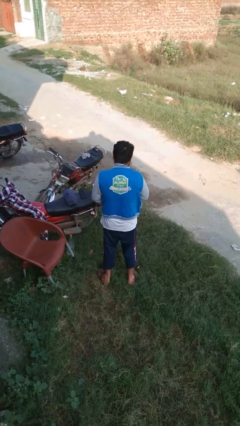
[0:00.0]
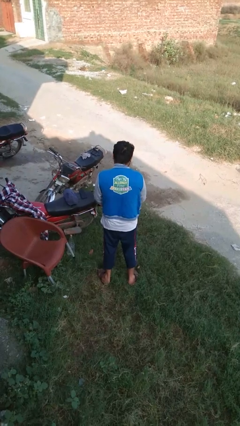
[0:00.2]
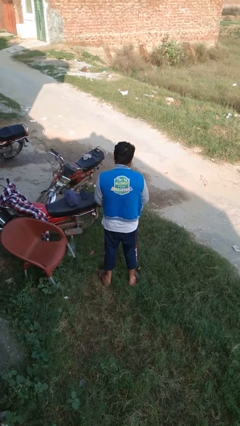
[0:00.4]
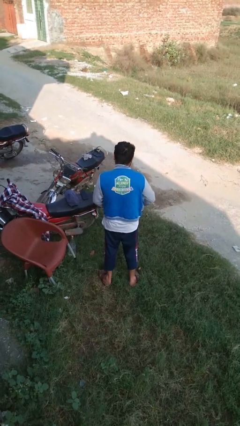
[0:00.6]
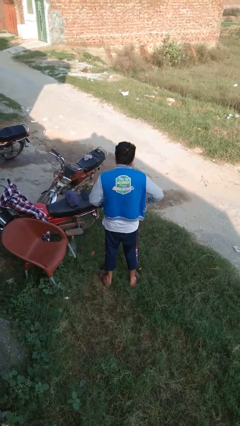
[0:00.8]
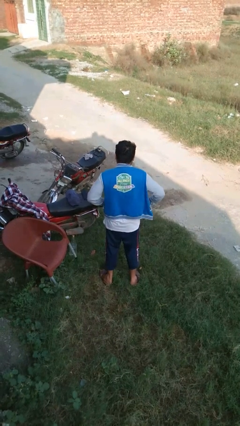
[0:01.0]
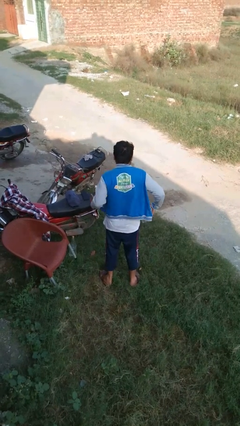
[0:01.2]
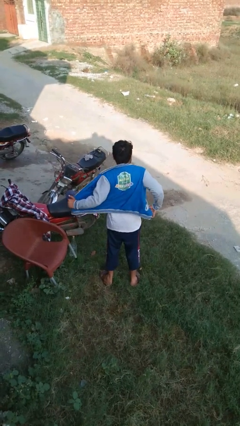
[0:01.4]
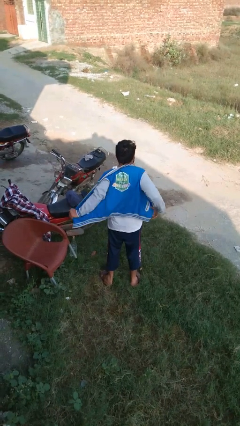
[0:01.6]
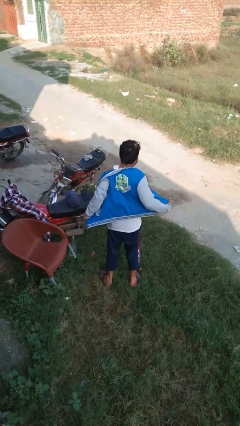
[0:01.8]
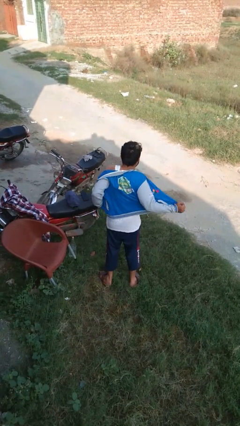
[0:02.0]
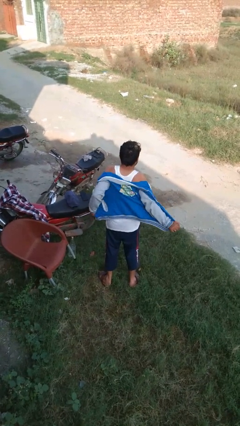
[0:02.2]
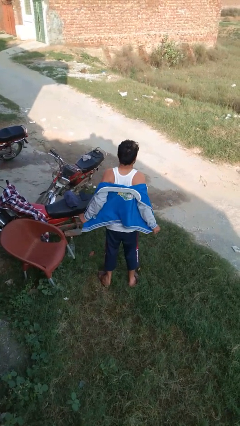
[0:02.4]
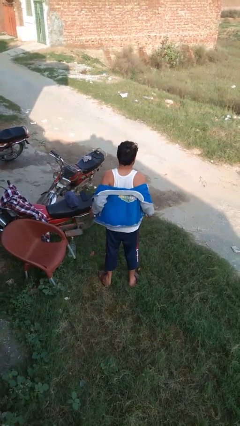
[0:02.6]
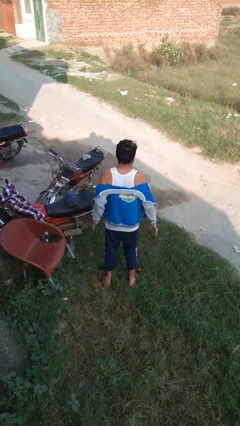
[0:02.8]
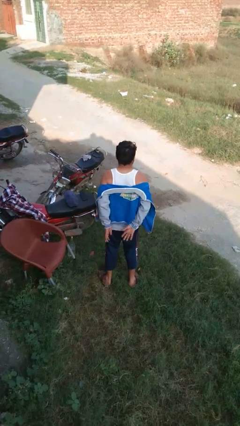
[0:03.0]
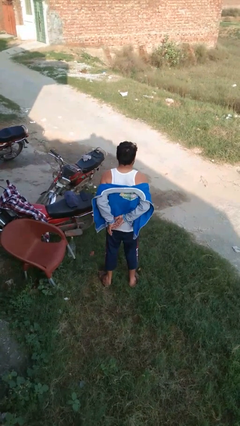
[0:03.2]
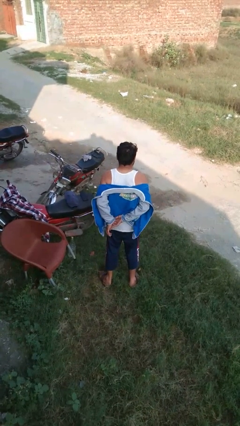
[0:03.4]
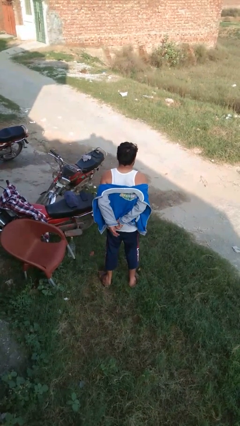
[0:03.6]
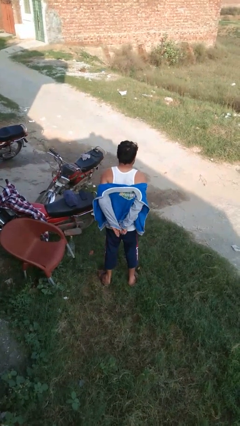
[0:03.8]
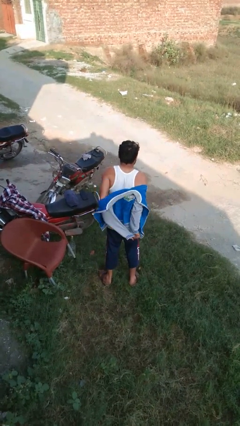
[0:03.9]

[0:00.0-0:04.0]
person takes off jacket

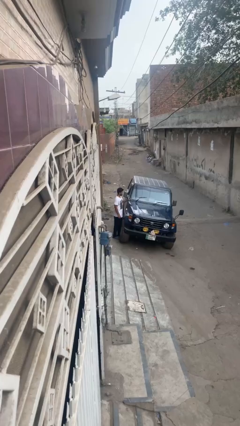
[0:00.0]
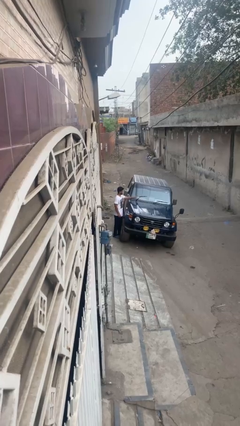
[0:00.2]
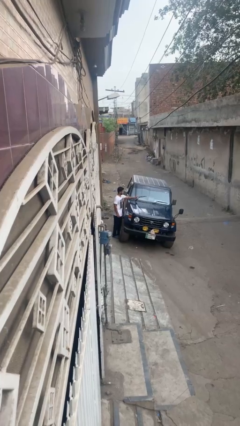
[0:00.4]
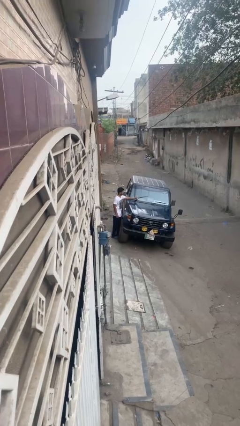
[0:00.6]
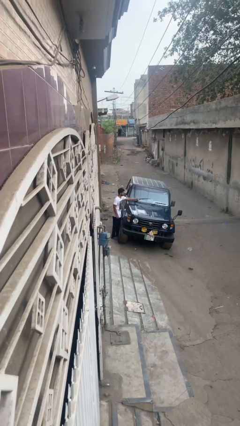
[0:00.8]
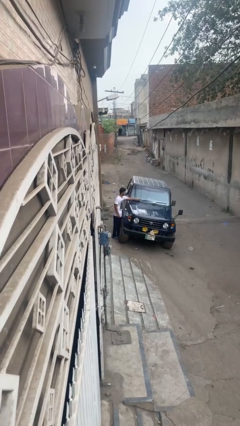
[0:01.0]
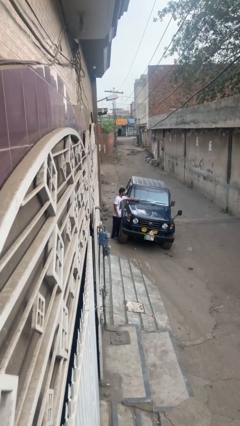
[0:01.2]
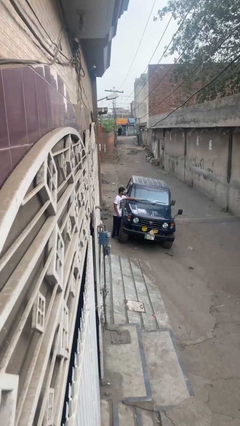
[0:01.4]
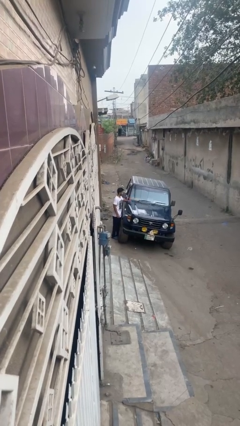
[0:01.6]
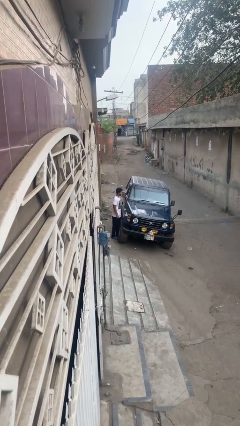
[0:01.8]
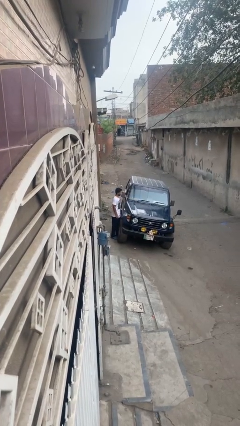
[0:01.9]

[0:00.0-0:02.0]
person flips down car wipers

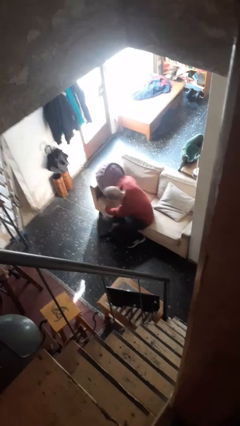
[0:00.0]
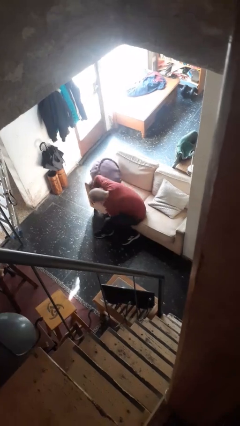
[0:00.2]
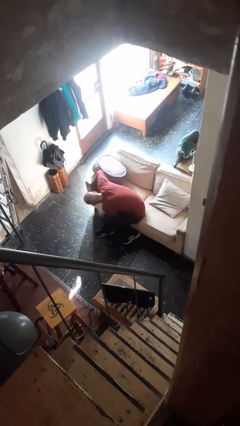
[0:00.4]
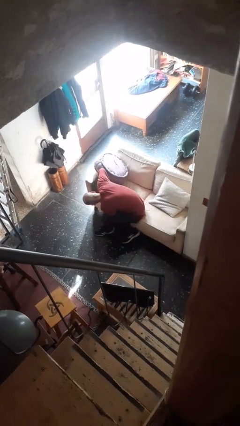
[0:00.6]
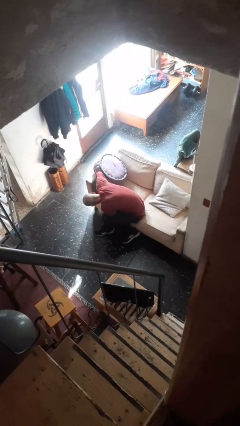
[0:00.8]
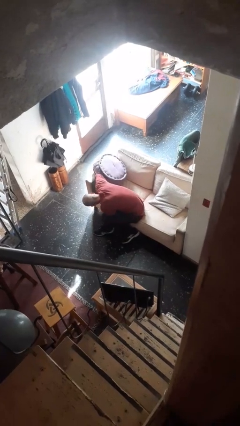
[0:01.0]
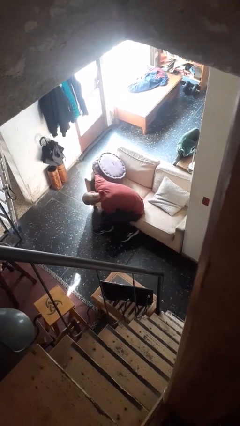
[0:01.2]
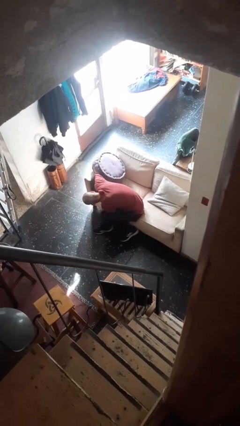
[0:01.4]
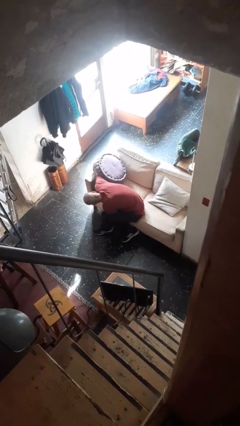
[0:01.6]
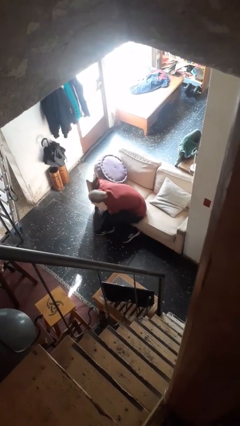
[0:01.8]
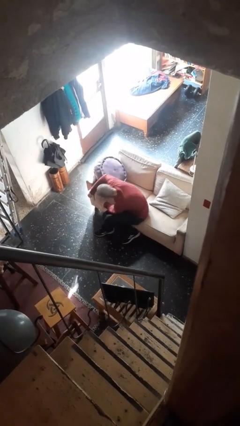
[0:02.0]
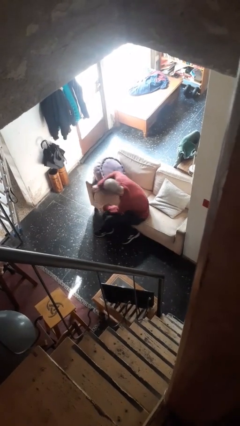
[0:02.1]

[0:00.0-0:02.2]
person searches in couch

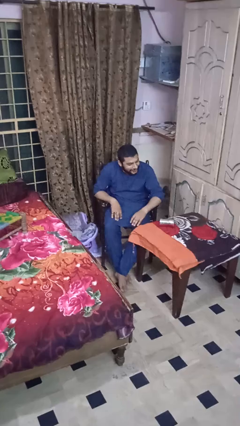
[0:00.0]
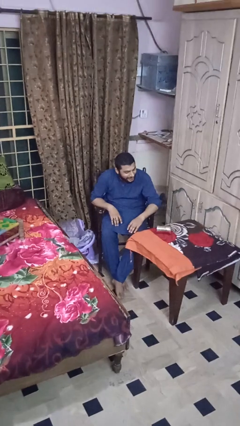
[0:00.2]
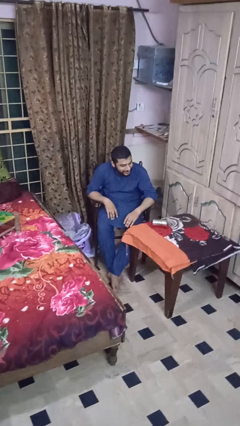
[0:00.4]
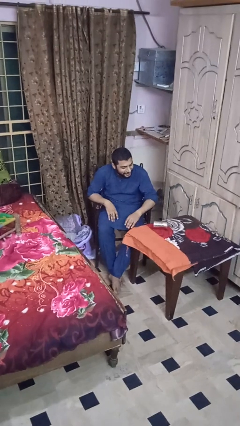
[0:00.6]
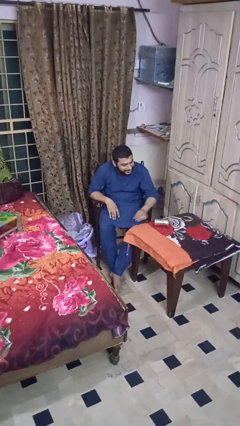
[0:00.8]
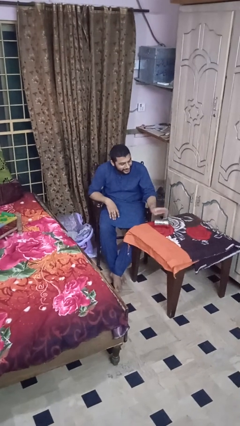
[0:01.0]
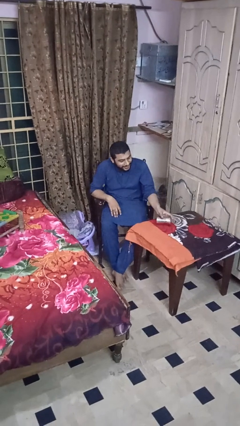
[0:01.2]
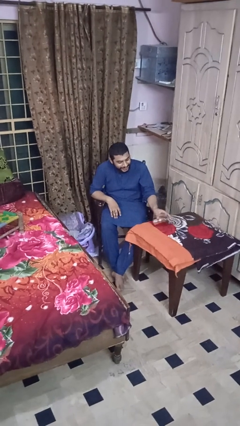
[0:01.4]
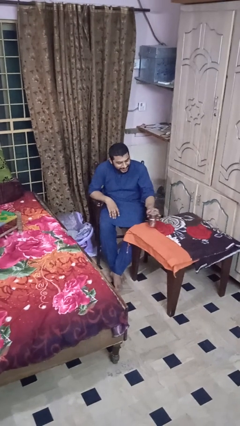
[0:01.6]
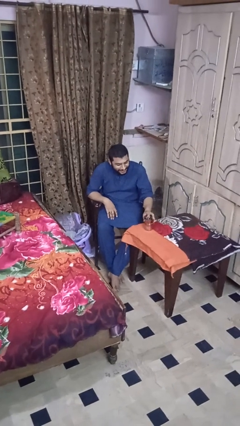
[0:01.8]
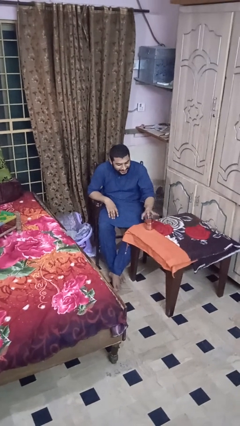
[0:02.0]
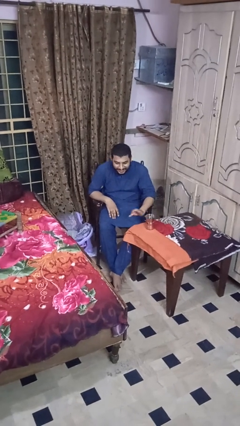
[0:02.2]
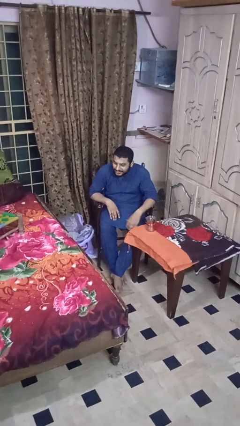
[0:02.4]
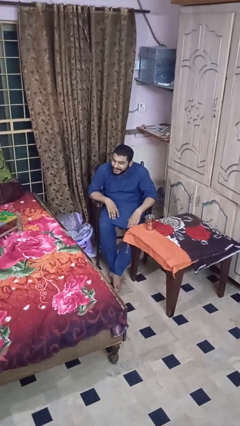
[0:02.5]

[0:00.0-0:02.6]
person sets upright glass

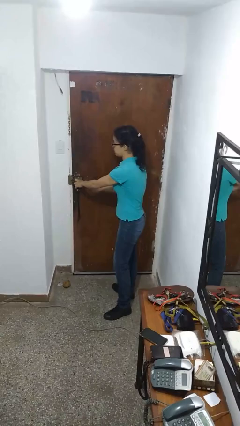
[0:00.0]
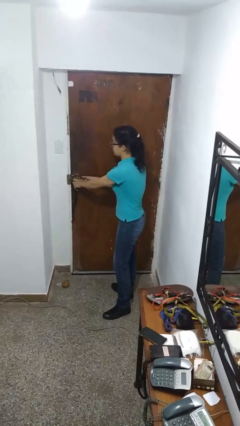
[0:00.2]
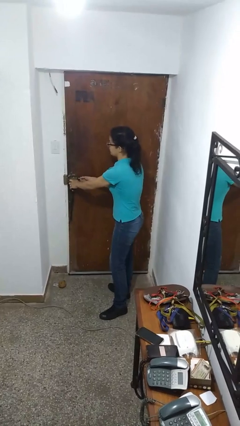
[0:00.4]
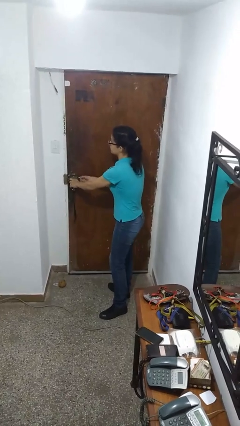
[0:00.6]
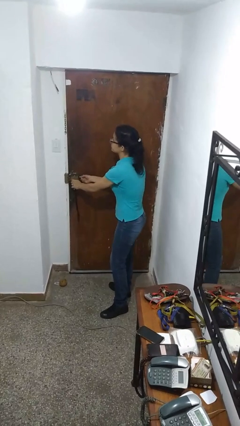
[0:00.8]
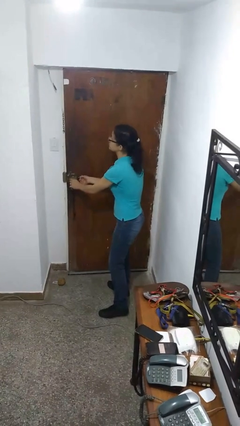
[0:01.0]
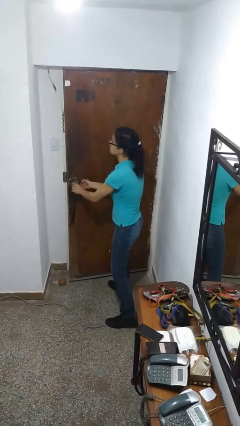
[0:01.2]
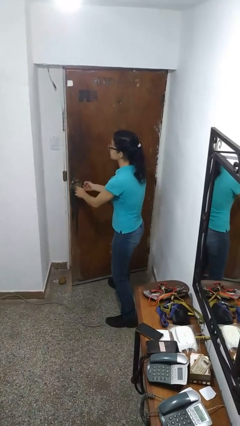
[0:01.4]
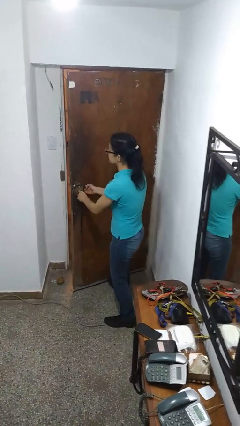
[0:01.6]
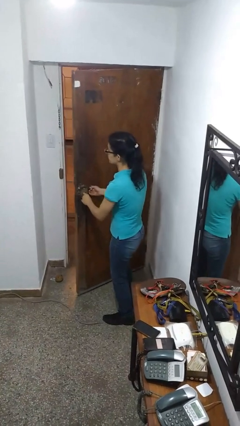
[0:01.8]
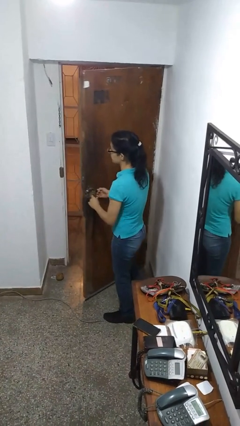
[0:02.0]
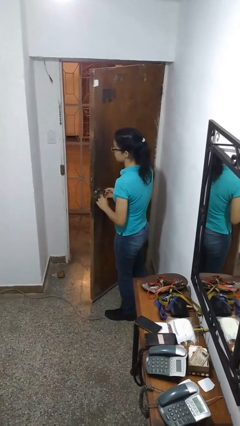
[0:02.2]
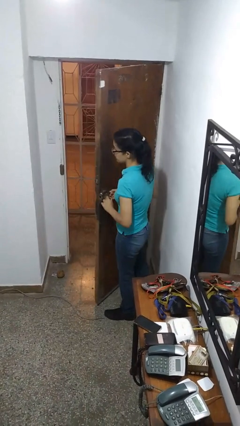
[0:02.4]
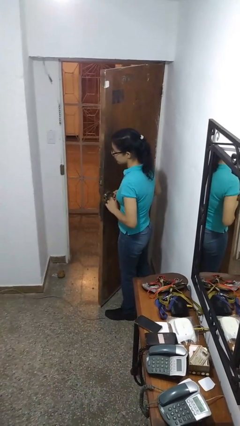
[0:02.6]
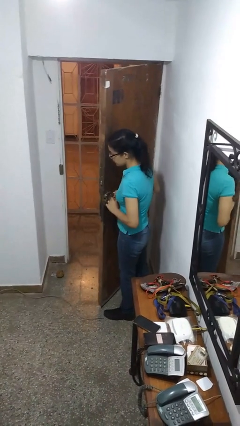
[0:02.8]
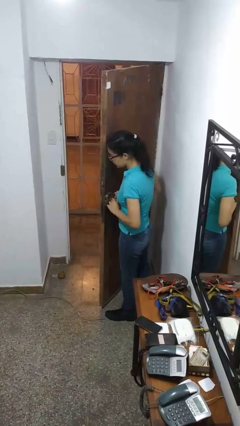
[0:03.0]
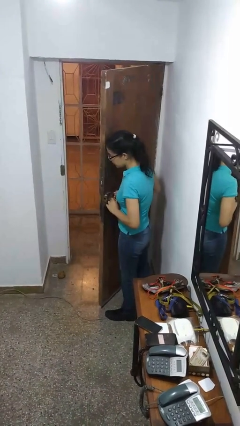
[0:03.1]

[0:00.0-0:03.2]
person opens facility door

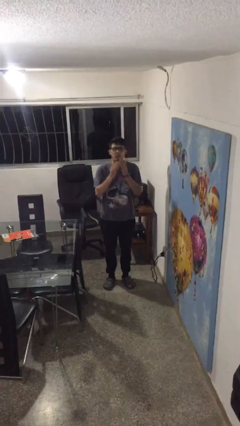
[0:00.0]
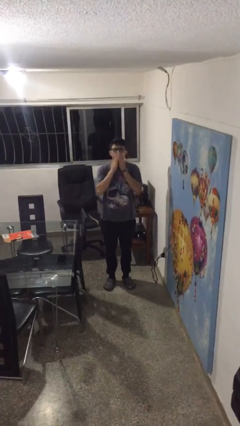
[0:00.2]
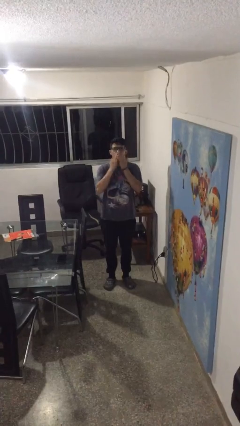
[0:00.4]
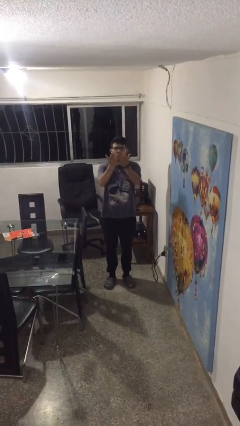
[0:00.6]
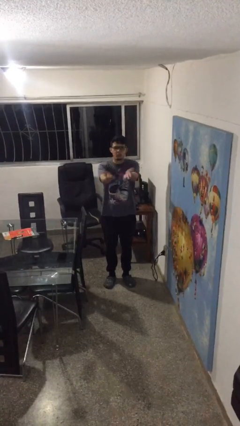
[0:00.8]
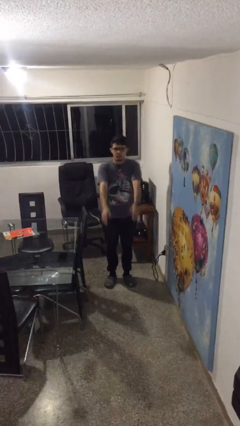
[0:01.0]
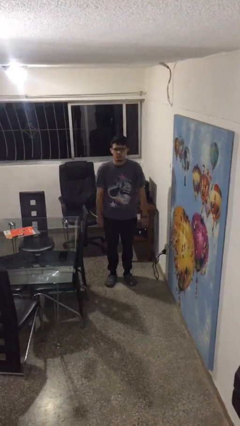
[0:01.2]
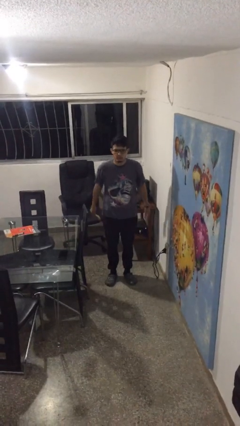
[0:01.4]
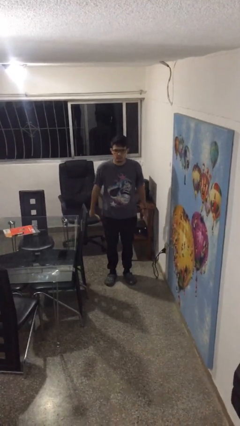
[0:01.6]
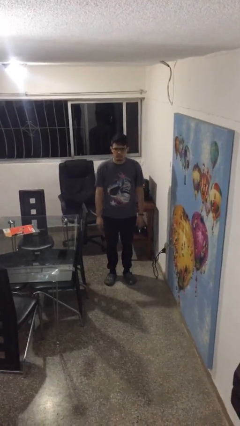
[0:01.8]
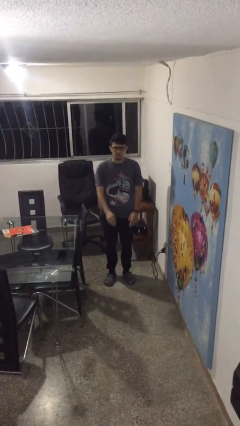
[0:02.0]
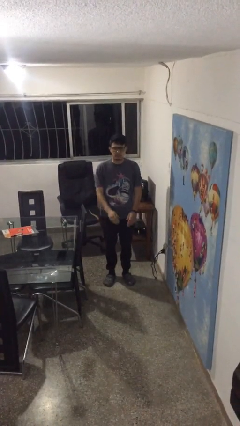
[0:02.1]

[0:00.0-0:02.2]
person gestures blow kiss

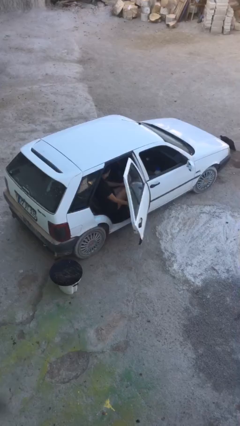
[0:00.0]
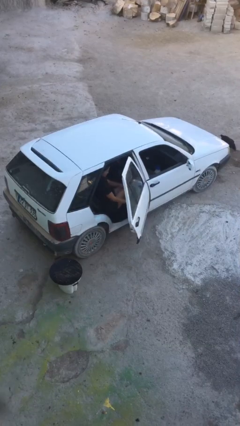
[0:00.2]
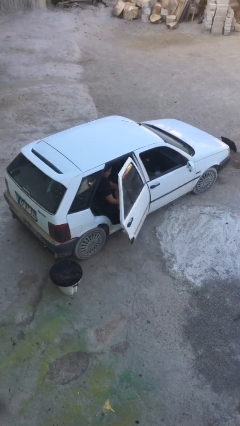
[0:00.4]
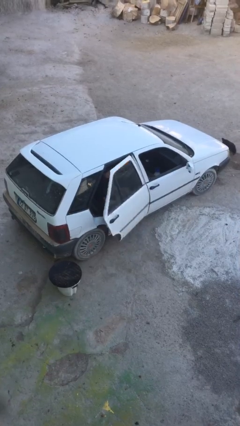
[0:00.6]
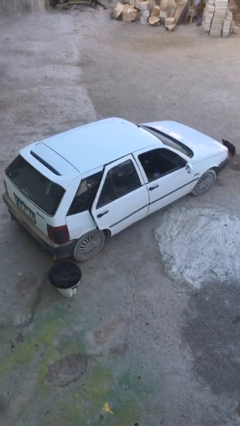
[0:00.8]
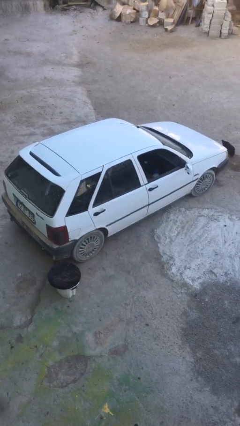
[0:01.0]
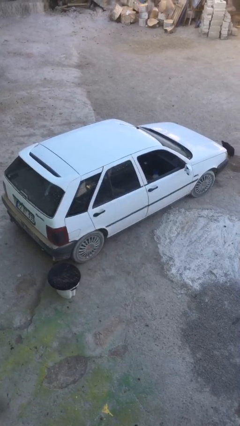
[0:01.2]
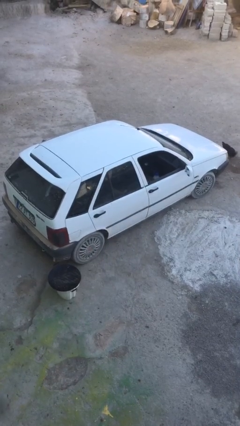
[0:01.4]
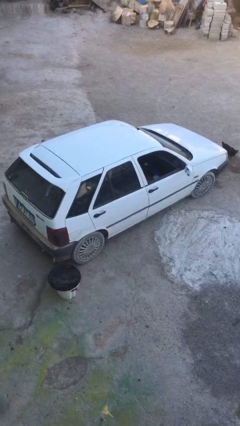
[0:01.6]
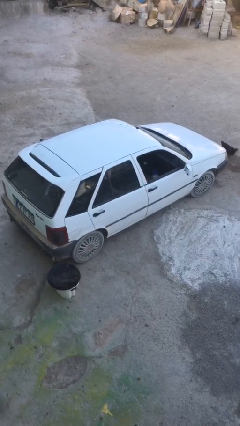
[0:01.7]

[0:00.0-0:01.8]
person closes car door
